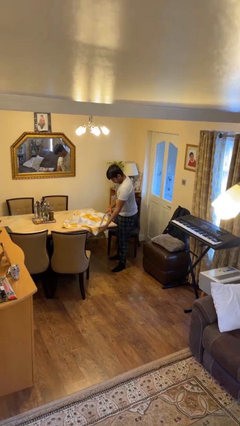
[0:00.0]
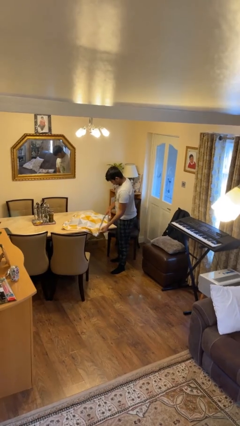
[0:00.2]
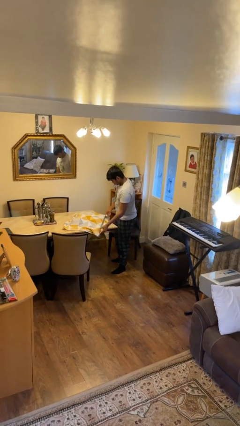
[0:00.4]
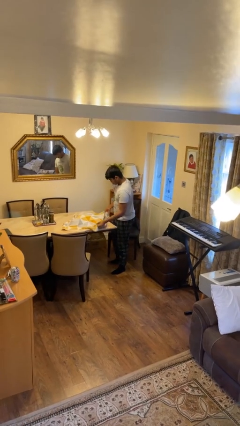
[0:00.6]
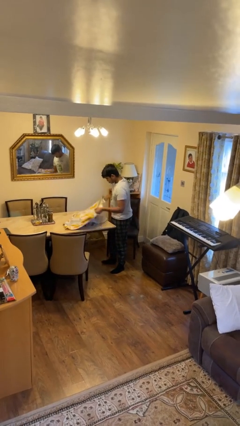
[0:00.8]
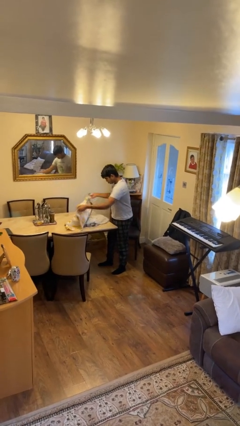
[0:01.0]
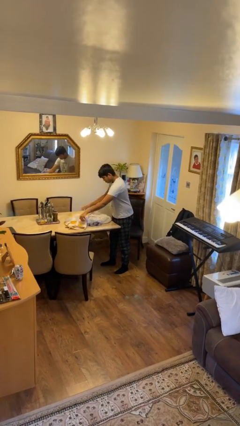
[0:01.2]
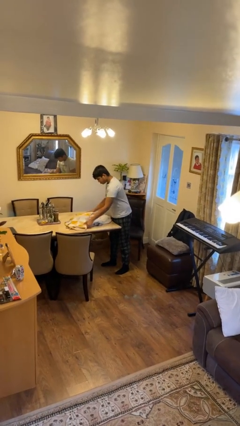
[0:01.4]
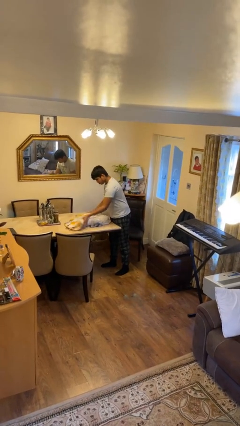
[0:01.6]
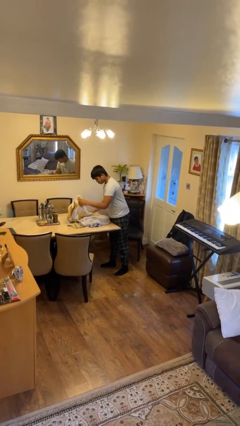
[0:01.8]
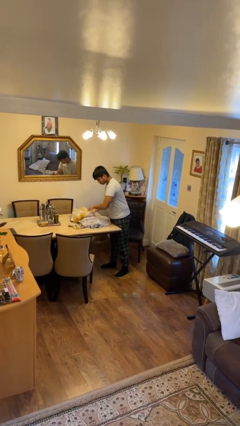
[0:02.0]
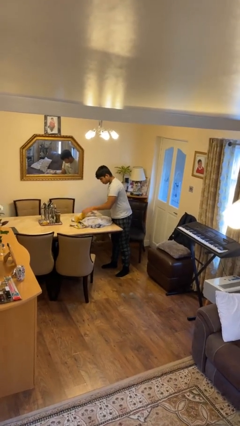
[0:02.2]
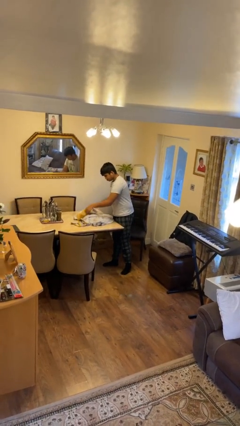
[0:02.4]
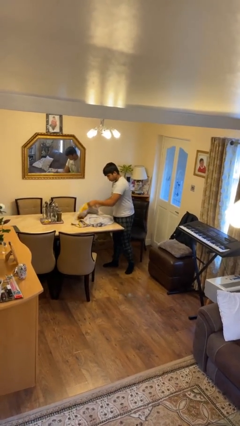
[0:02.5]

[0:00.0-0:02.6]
person folds towel

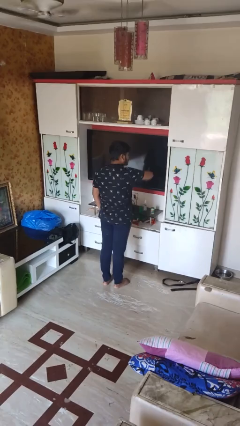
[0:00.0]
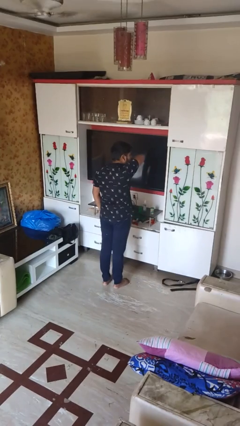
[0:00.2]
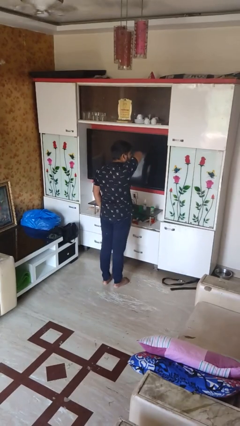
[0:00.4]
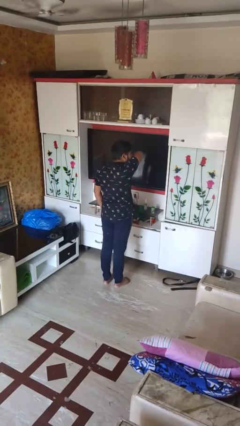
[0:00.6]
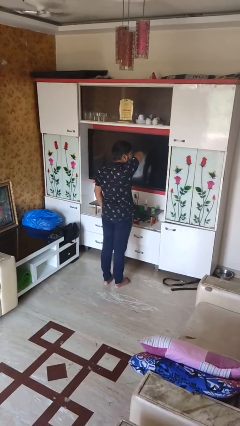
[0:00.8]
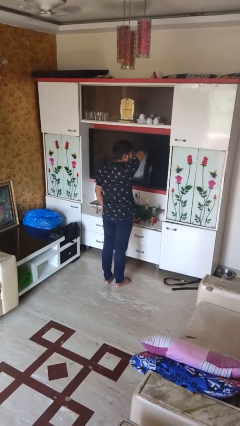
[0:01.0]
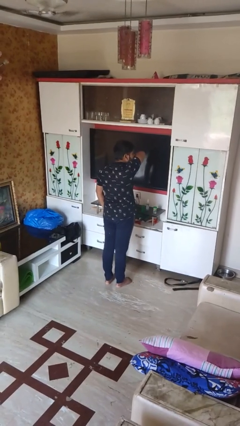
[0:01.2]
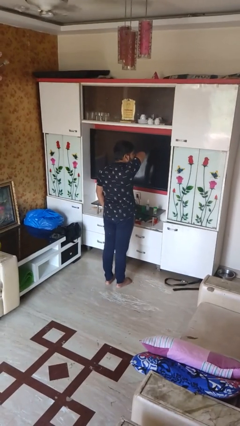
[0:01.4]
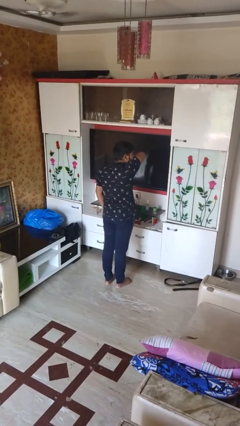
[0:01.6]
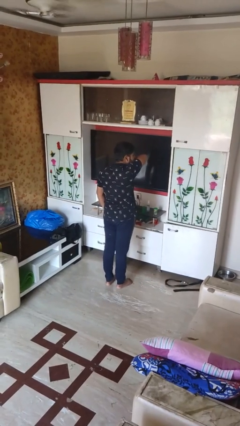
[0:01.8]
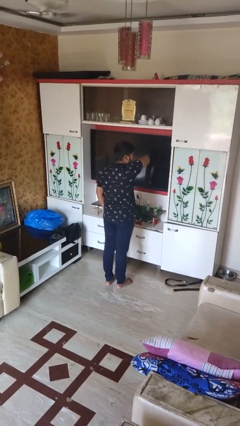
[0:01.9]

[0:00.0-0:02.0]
person sneezes into arm

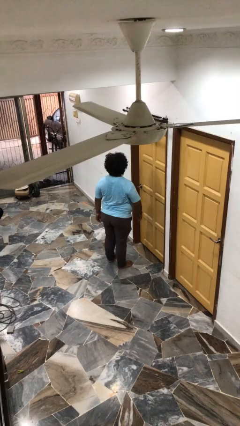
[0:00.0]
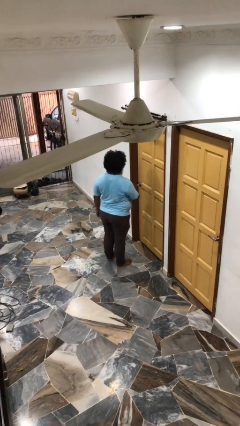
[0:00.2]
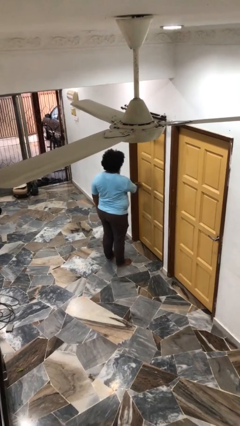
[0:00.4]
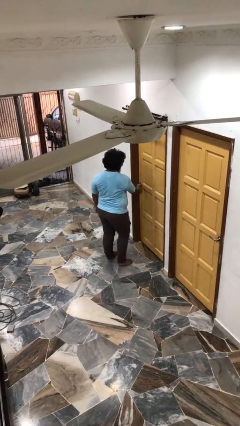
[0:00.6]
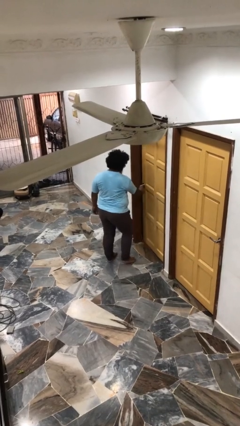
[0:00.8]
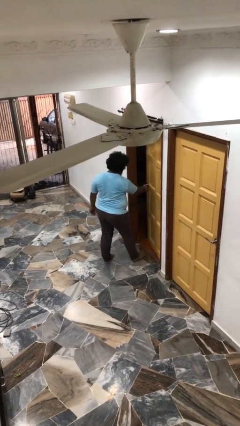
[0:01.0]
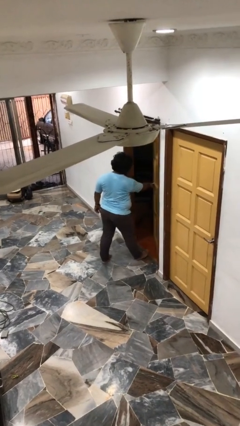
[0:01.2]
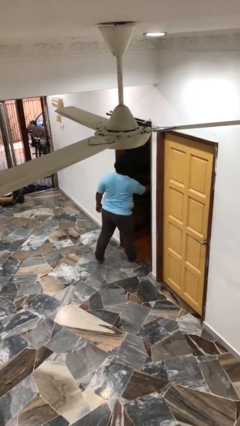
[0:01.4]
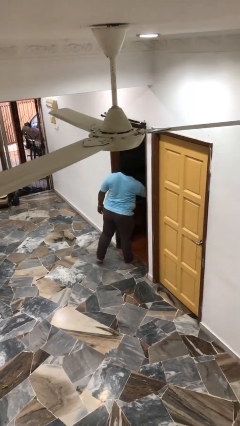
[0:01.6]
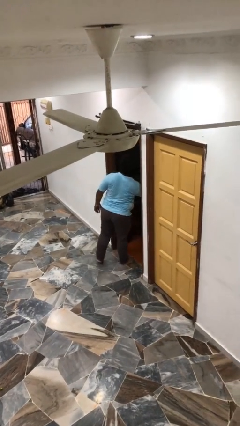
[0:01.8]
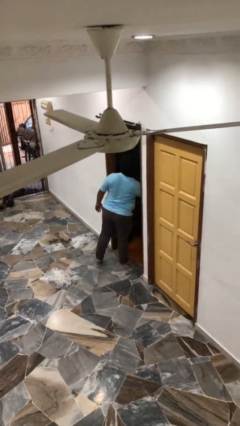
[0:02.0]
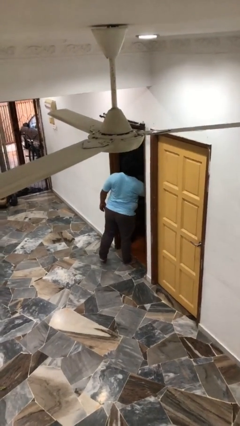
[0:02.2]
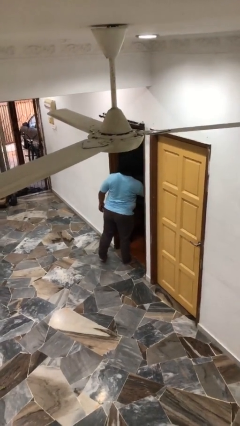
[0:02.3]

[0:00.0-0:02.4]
person opens facility door

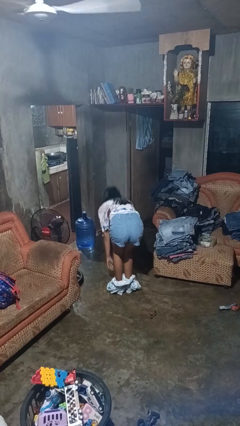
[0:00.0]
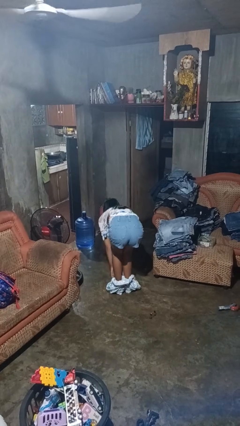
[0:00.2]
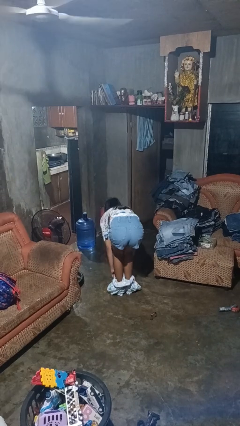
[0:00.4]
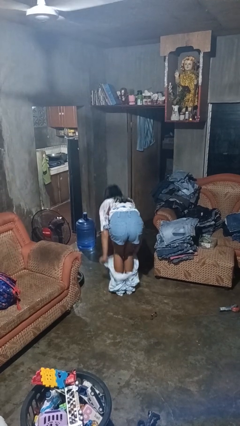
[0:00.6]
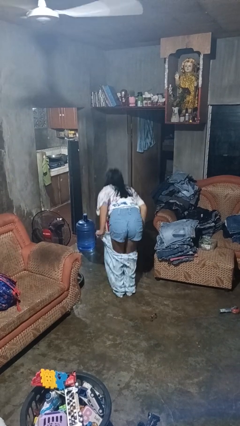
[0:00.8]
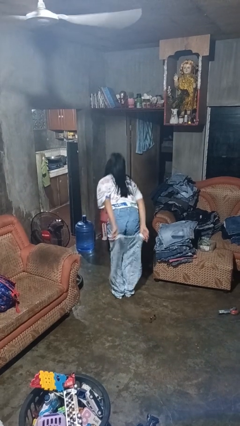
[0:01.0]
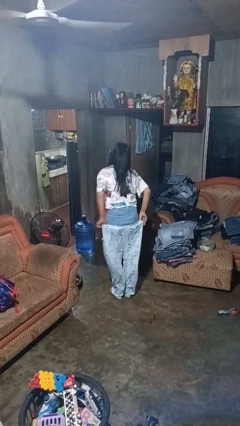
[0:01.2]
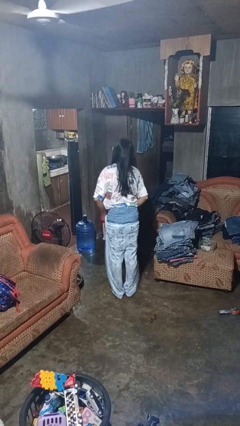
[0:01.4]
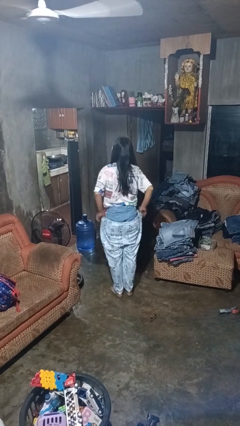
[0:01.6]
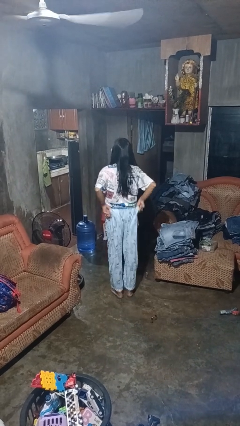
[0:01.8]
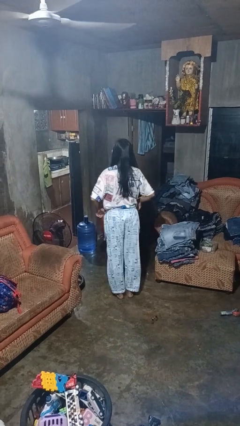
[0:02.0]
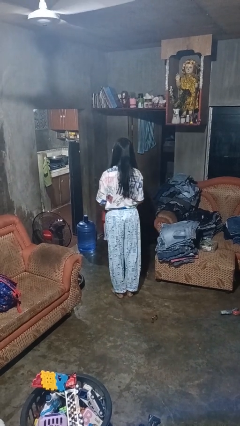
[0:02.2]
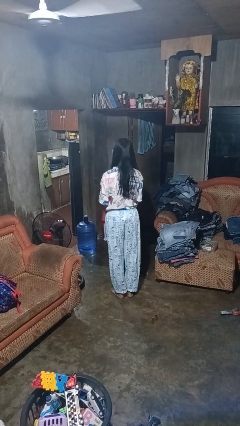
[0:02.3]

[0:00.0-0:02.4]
person puts on pants

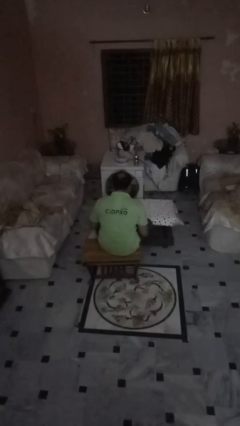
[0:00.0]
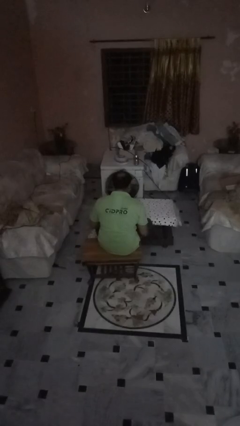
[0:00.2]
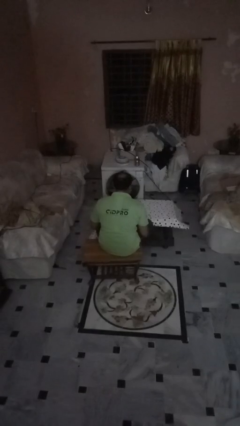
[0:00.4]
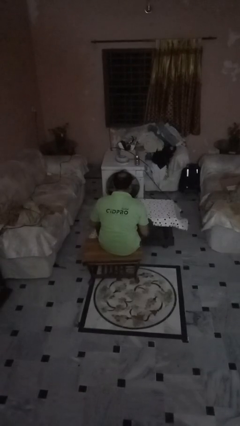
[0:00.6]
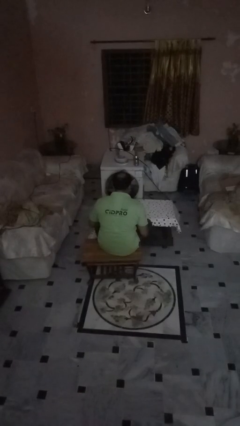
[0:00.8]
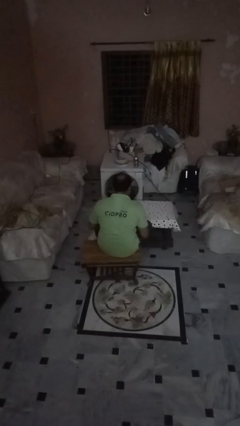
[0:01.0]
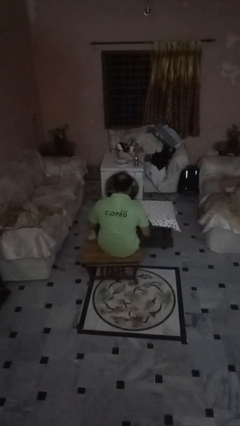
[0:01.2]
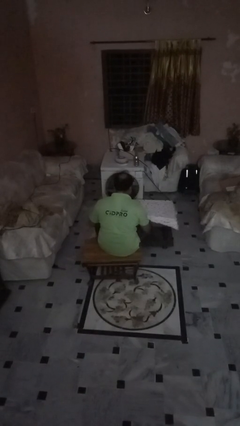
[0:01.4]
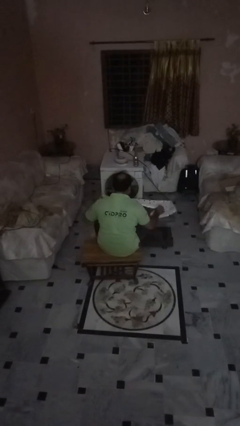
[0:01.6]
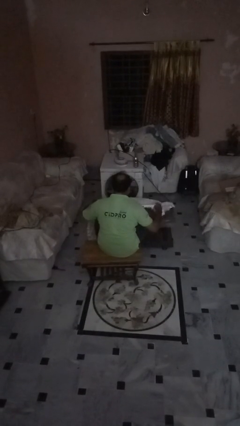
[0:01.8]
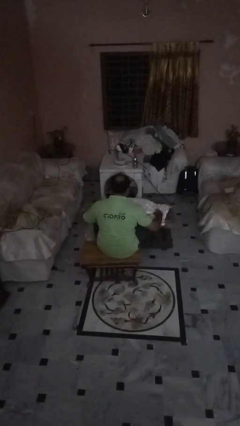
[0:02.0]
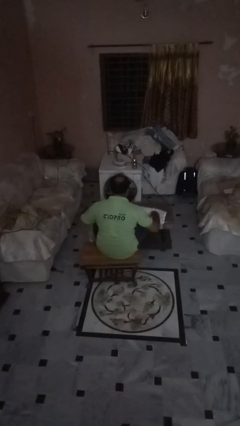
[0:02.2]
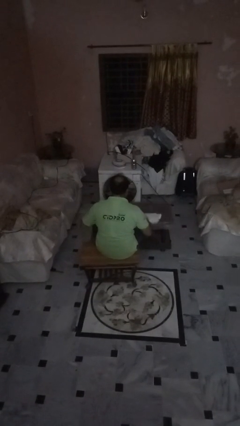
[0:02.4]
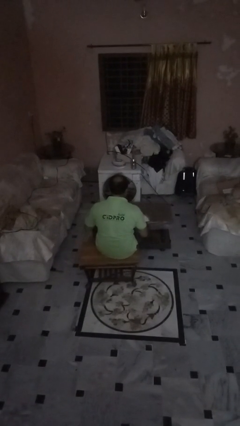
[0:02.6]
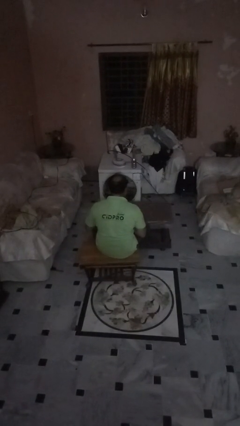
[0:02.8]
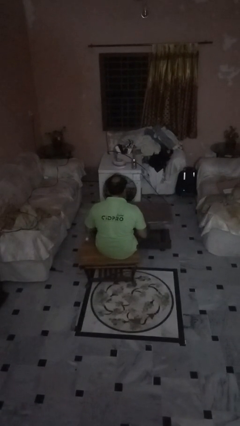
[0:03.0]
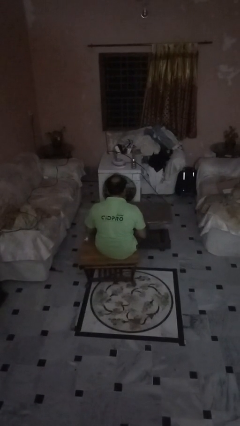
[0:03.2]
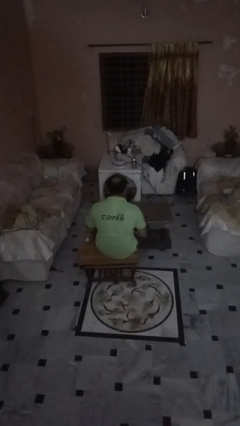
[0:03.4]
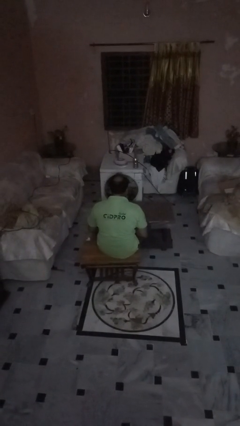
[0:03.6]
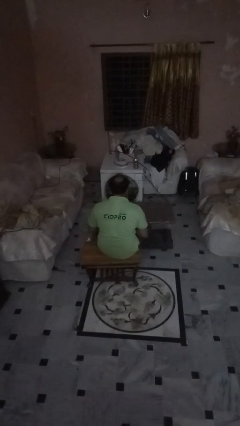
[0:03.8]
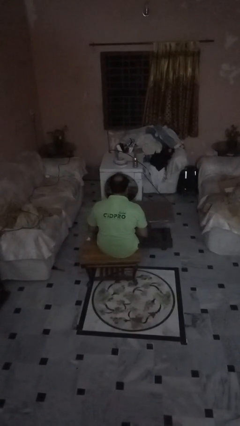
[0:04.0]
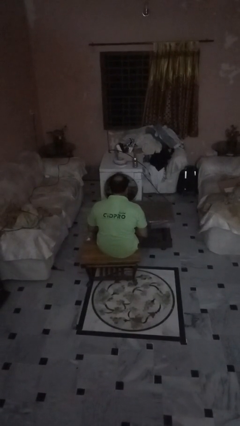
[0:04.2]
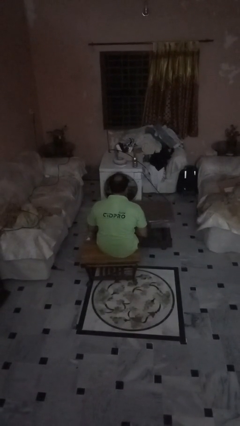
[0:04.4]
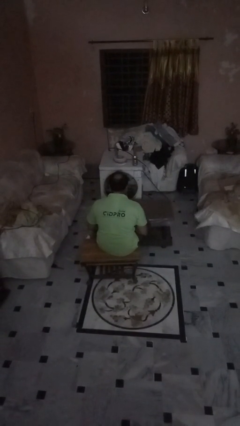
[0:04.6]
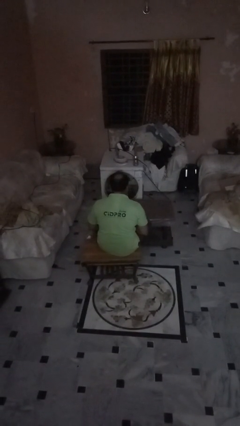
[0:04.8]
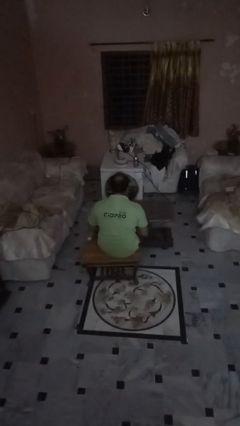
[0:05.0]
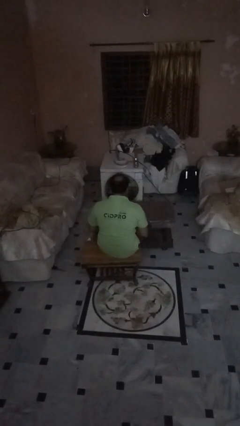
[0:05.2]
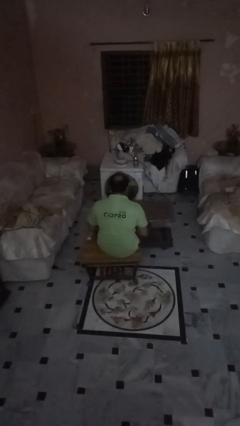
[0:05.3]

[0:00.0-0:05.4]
person folds tablecloth

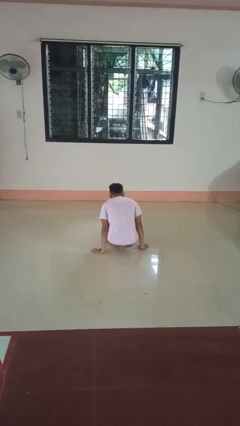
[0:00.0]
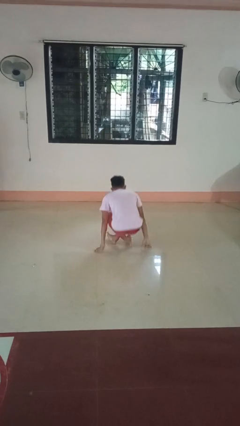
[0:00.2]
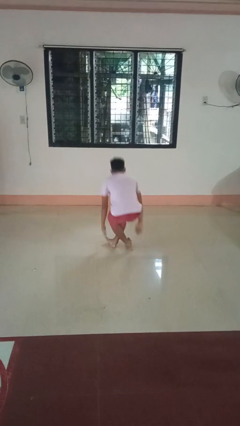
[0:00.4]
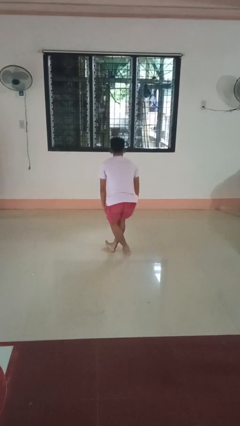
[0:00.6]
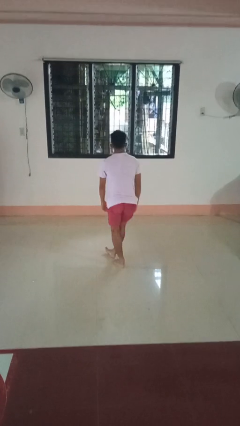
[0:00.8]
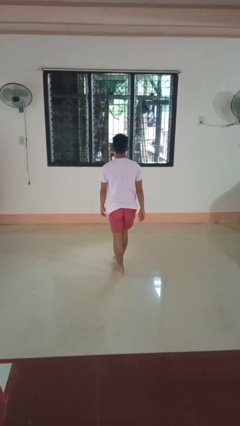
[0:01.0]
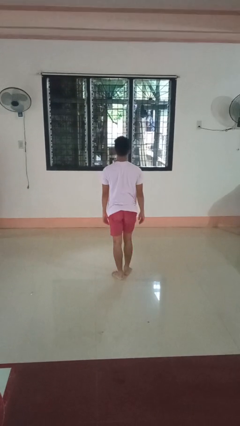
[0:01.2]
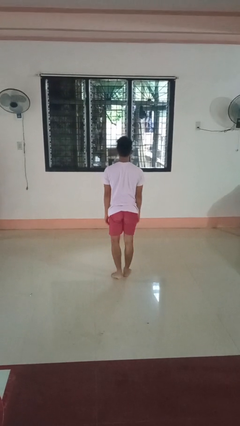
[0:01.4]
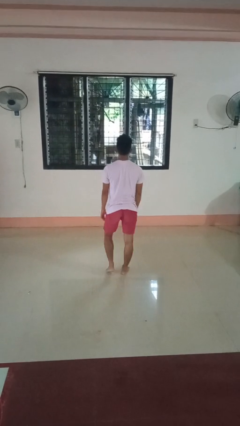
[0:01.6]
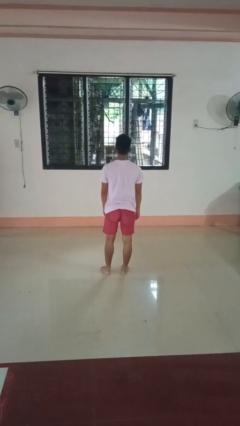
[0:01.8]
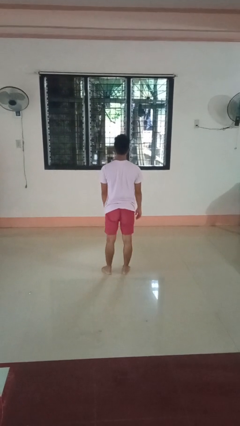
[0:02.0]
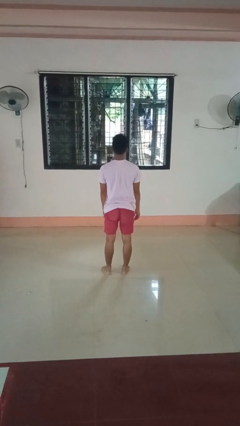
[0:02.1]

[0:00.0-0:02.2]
person stands up from floor

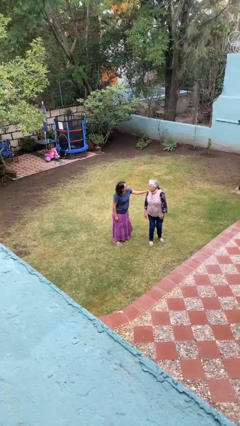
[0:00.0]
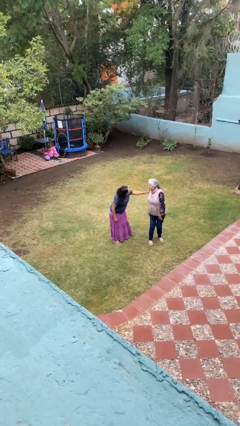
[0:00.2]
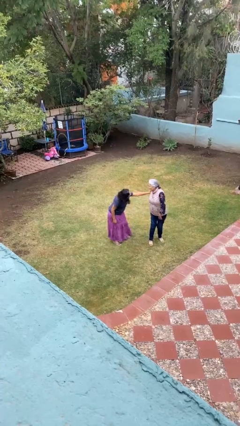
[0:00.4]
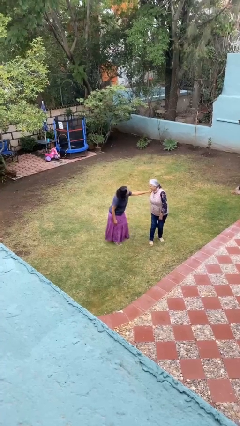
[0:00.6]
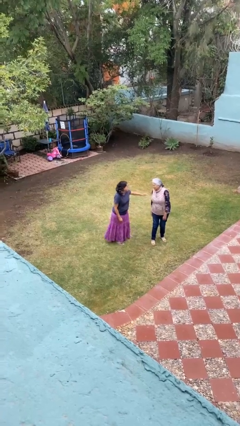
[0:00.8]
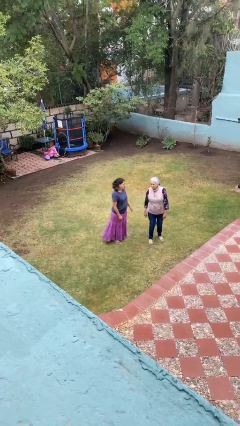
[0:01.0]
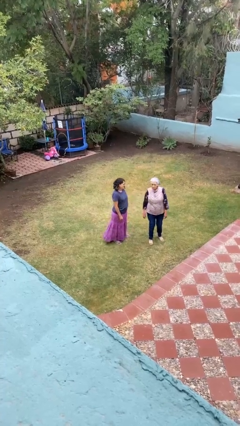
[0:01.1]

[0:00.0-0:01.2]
person spins person around
